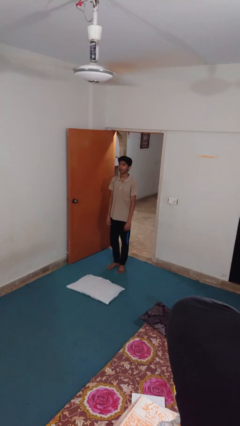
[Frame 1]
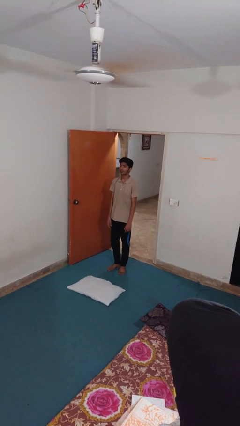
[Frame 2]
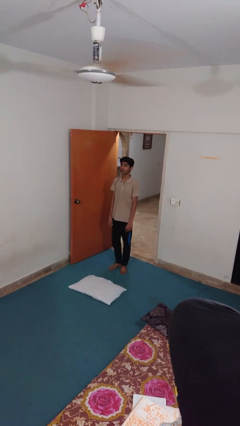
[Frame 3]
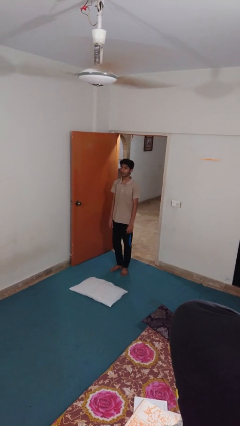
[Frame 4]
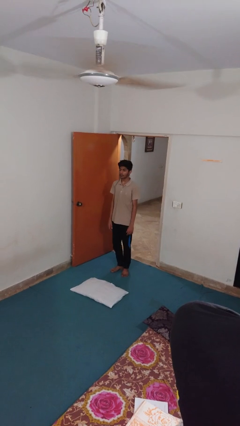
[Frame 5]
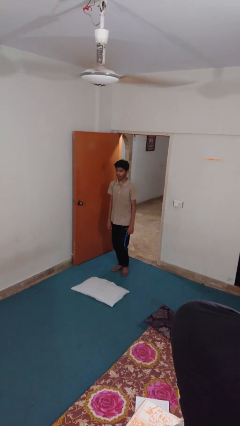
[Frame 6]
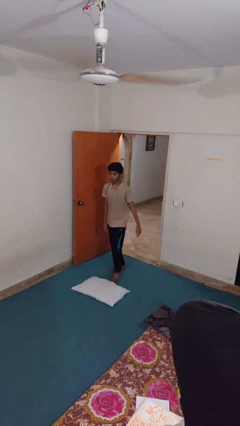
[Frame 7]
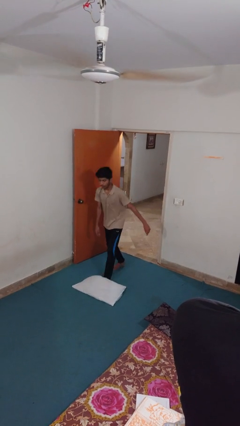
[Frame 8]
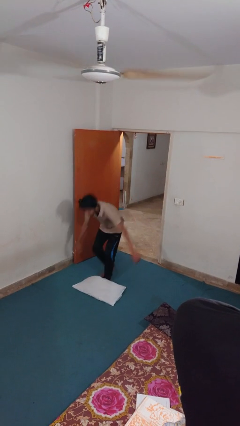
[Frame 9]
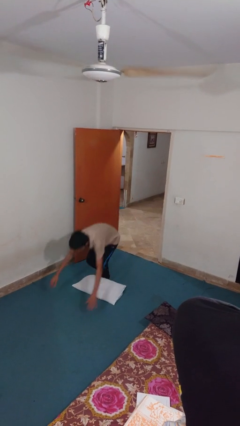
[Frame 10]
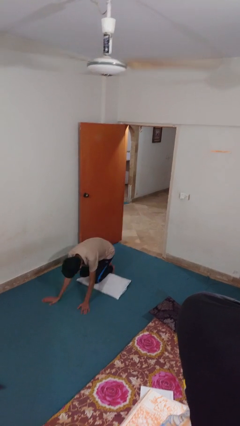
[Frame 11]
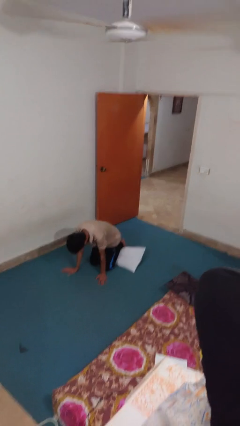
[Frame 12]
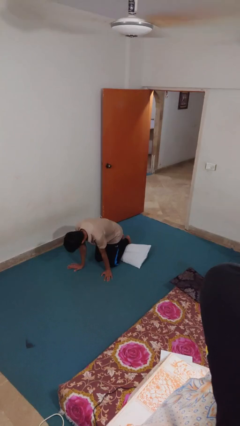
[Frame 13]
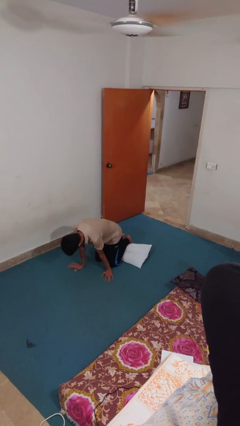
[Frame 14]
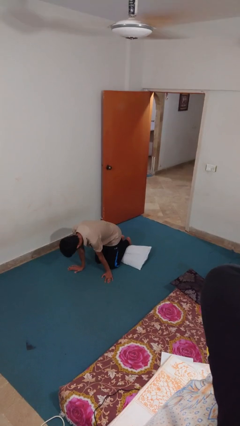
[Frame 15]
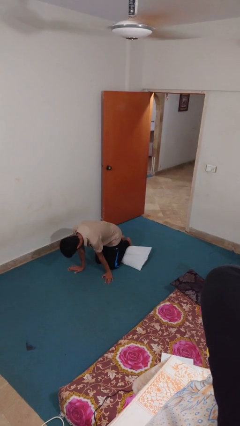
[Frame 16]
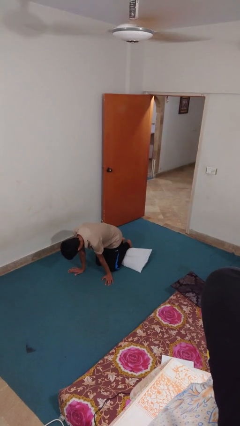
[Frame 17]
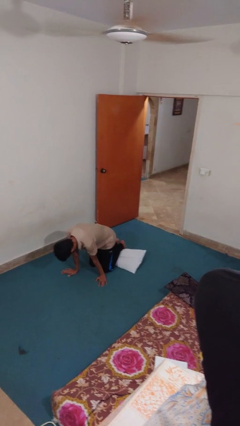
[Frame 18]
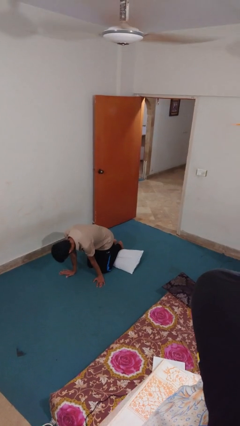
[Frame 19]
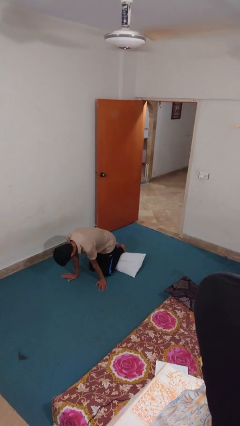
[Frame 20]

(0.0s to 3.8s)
person trips on object on floor

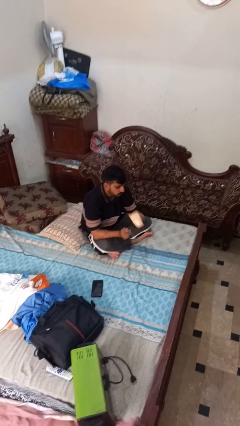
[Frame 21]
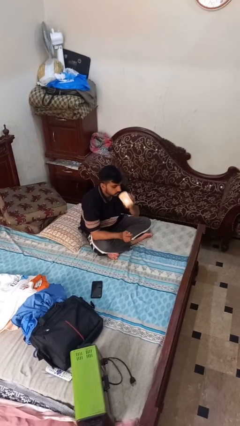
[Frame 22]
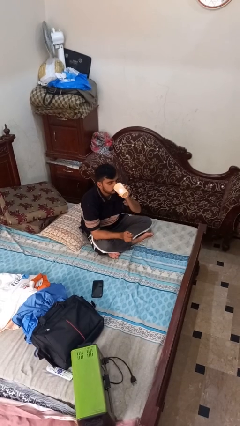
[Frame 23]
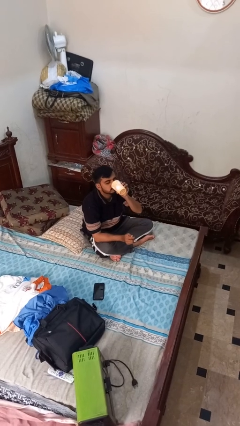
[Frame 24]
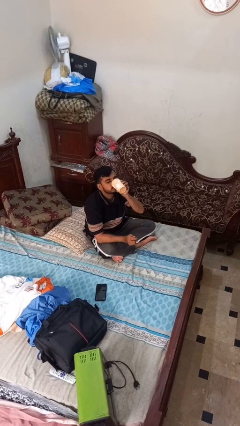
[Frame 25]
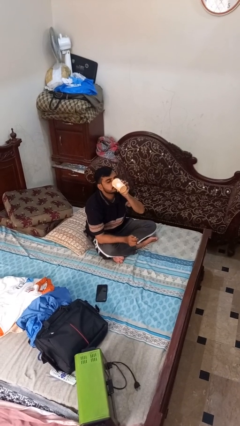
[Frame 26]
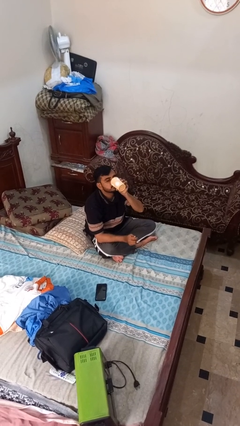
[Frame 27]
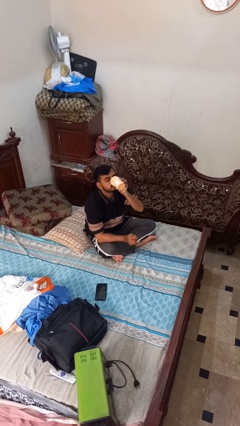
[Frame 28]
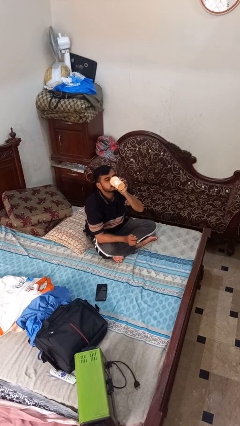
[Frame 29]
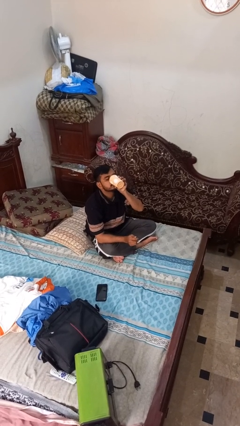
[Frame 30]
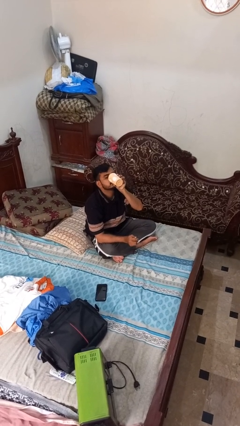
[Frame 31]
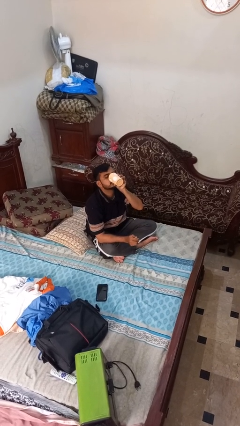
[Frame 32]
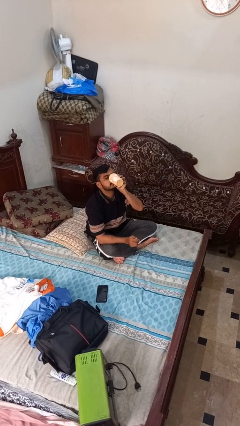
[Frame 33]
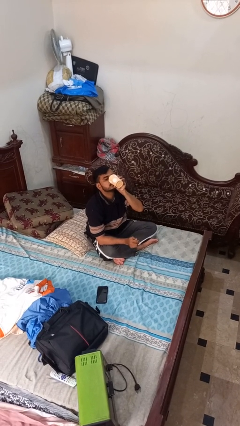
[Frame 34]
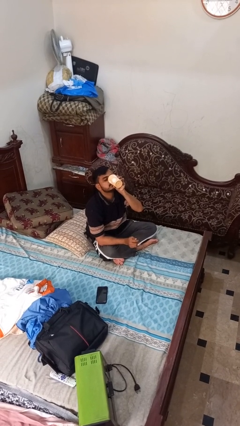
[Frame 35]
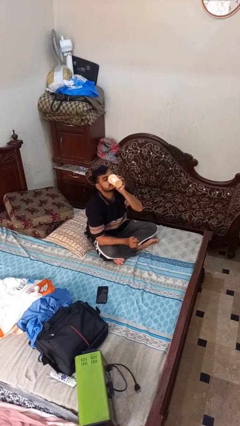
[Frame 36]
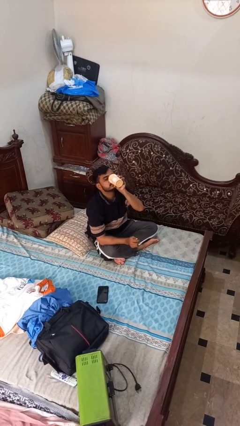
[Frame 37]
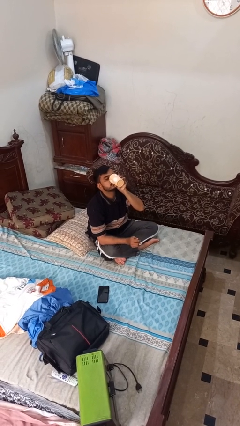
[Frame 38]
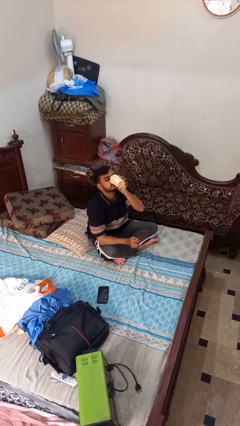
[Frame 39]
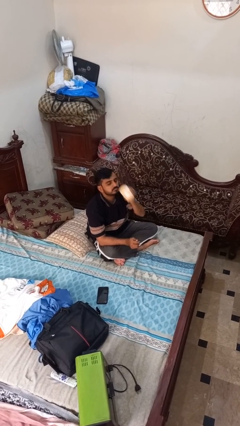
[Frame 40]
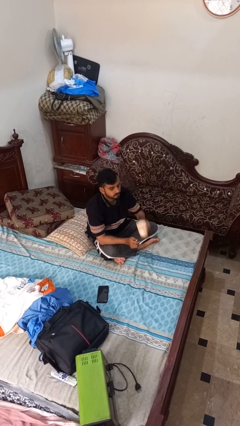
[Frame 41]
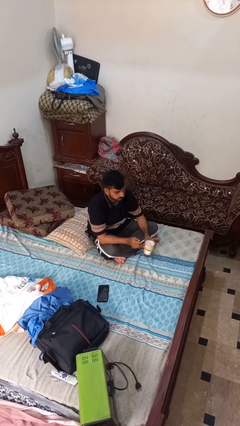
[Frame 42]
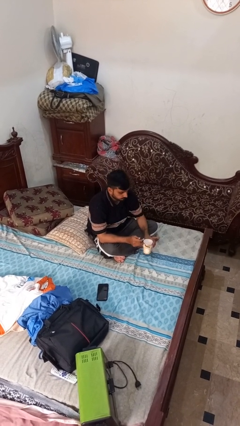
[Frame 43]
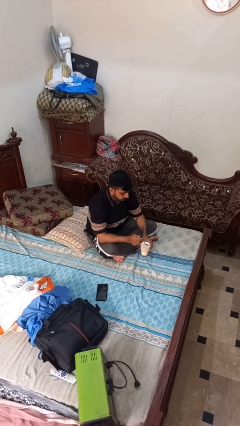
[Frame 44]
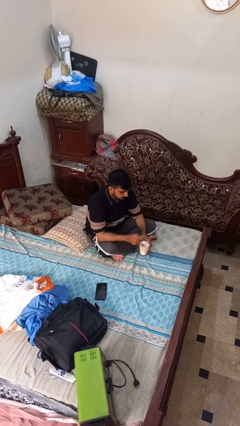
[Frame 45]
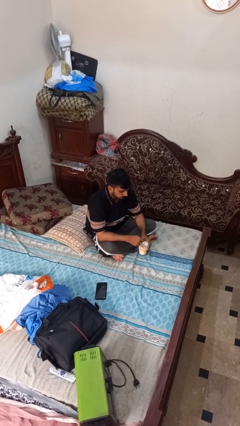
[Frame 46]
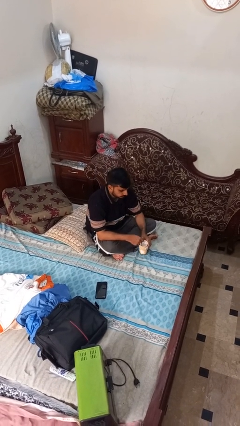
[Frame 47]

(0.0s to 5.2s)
person drinks from mug

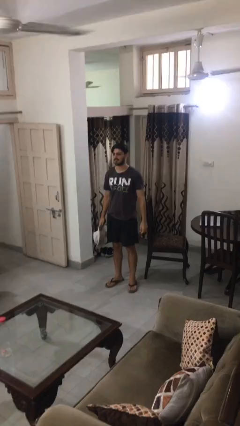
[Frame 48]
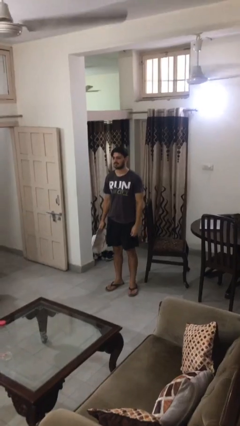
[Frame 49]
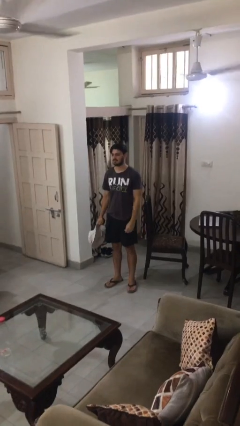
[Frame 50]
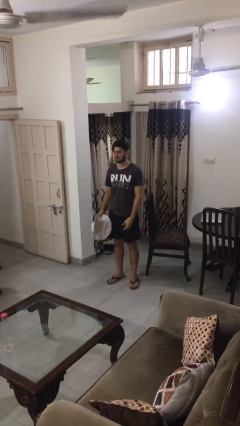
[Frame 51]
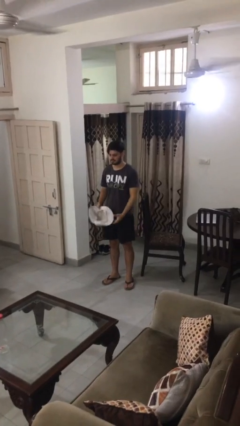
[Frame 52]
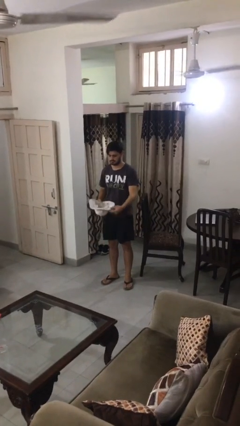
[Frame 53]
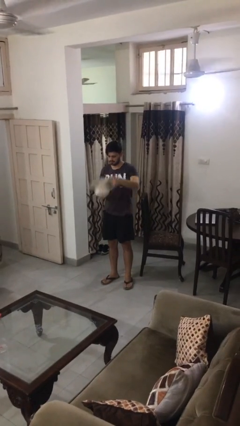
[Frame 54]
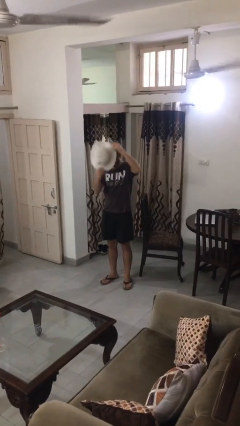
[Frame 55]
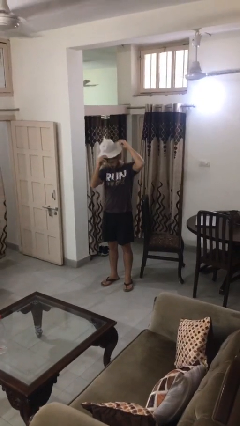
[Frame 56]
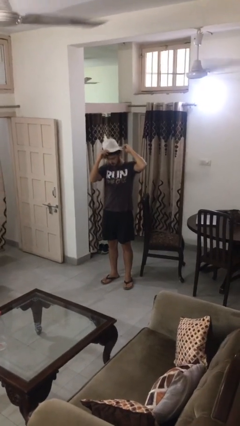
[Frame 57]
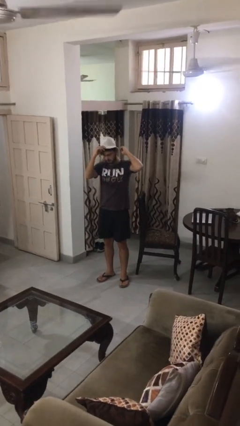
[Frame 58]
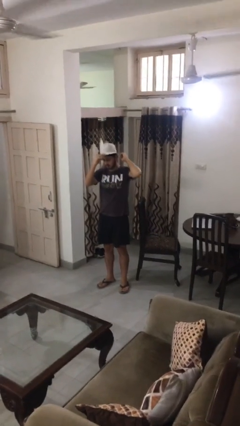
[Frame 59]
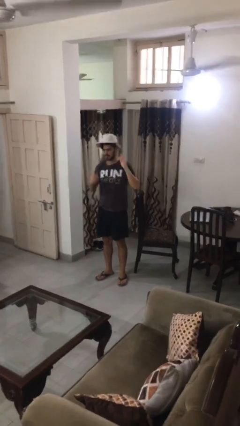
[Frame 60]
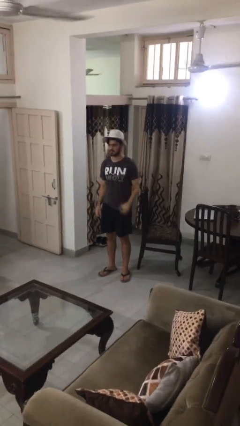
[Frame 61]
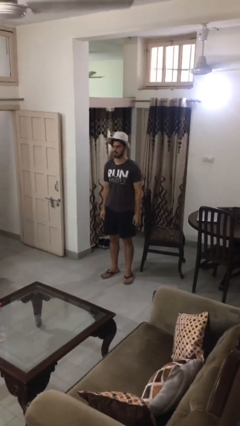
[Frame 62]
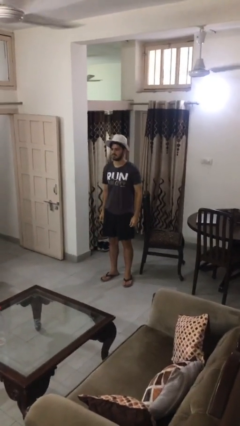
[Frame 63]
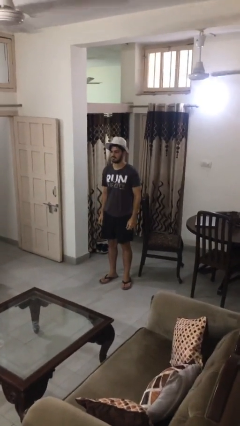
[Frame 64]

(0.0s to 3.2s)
person puts on hat

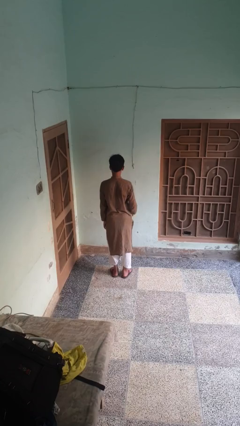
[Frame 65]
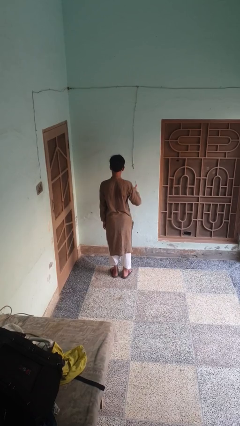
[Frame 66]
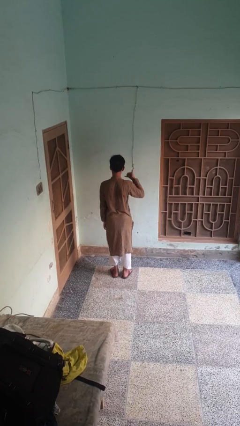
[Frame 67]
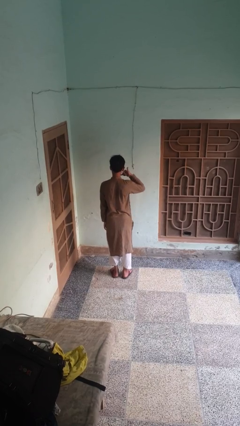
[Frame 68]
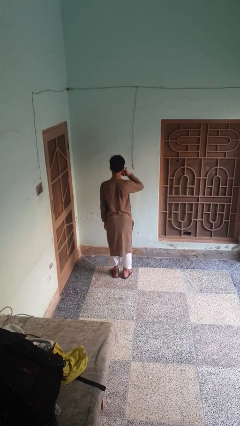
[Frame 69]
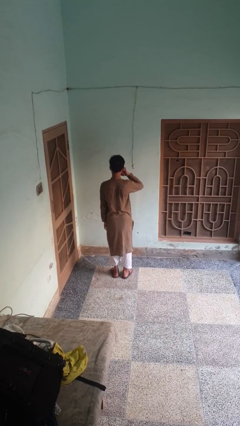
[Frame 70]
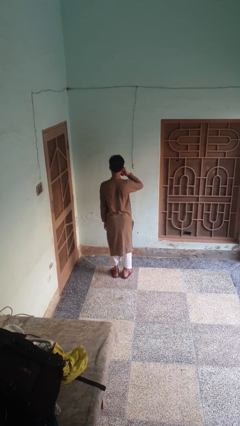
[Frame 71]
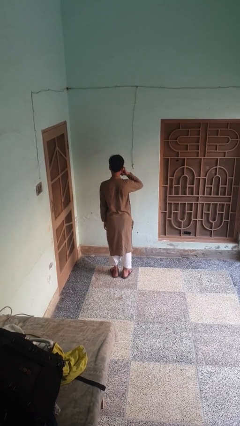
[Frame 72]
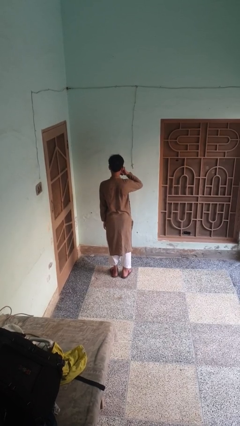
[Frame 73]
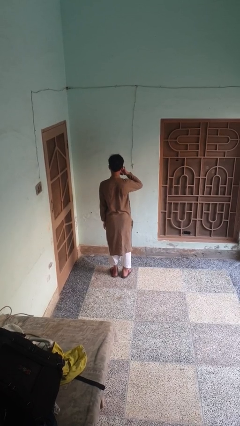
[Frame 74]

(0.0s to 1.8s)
person gestures call me

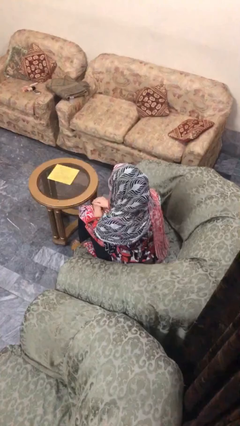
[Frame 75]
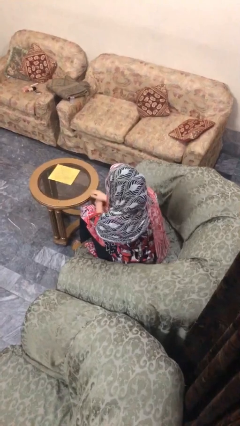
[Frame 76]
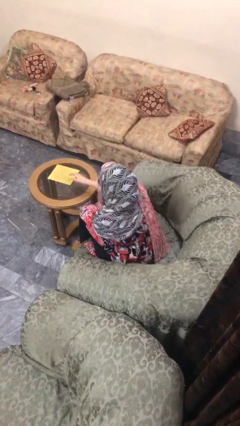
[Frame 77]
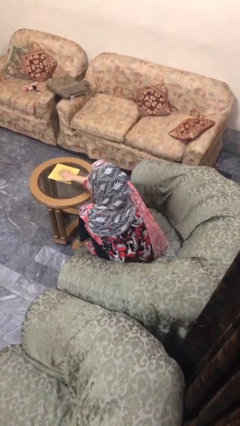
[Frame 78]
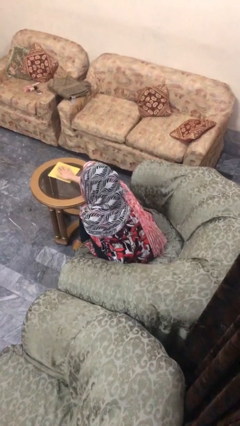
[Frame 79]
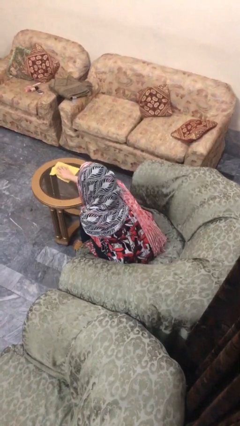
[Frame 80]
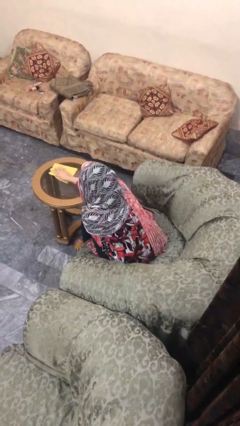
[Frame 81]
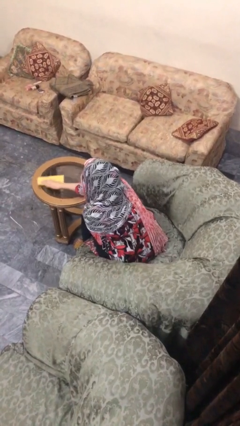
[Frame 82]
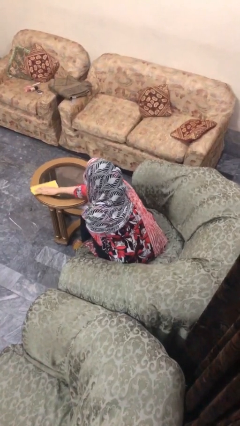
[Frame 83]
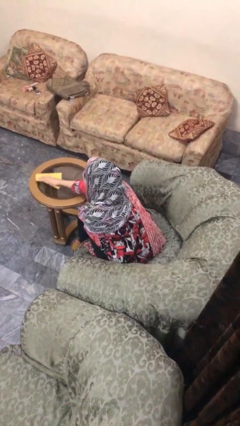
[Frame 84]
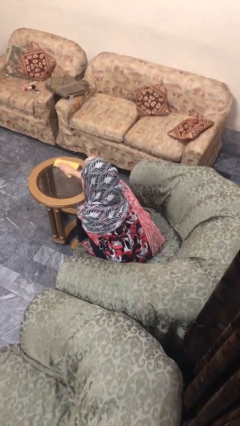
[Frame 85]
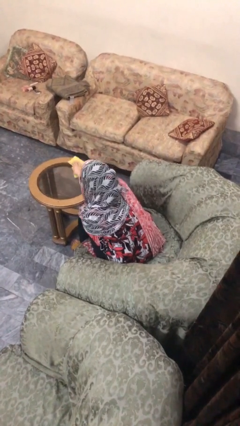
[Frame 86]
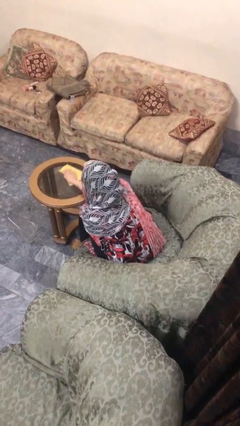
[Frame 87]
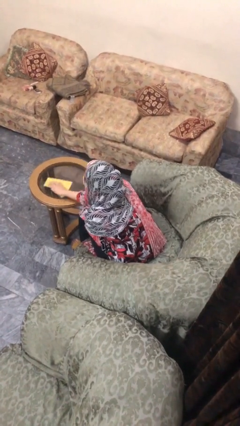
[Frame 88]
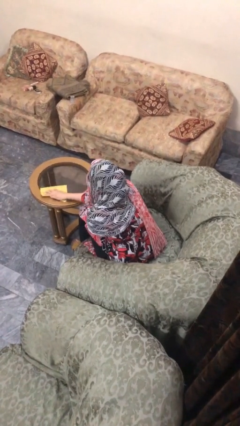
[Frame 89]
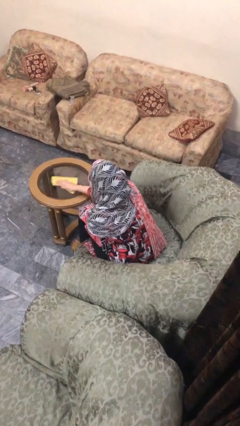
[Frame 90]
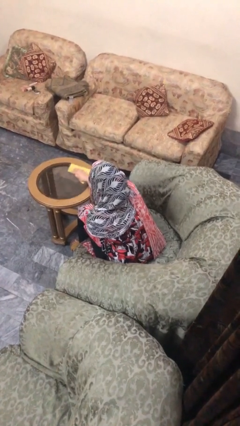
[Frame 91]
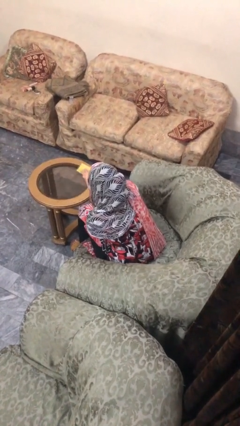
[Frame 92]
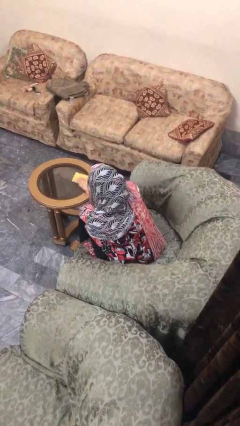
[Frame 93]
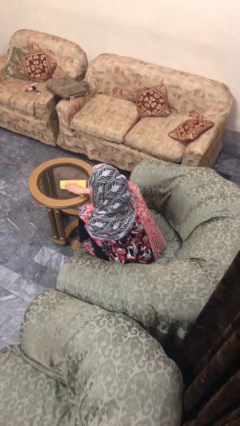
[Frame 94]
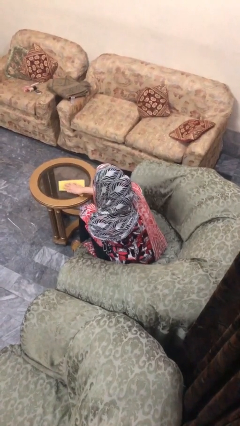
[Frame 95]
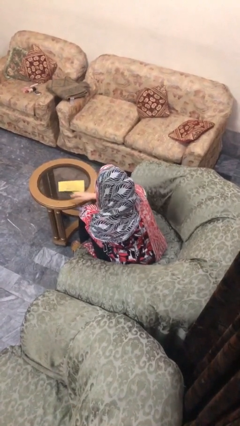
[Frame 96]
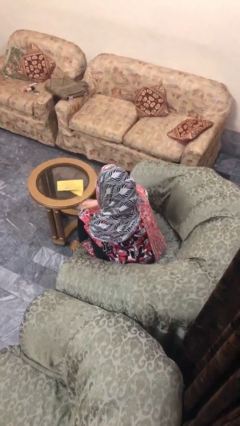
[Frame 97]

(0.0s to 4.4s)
person cleans table with rag
